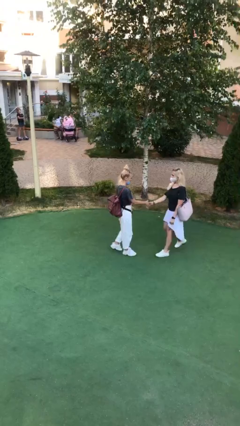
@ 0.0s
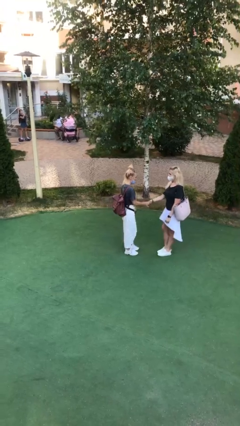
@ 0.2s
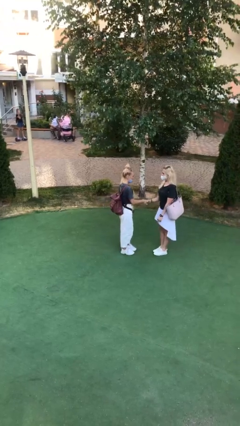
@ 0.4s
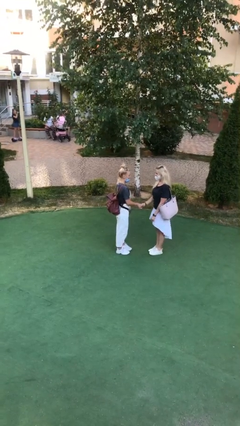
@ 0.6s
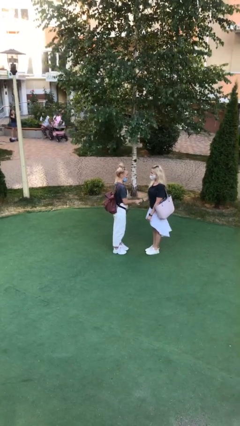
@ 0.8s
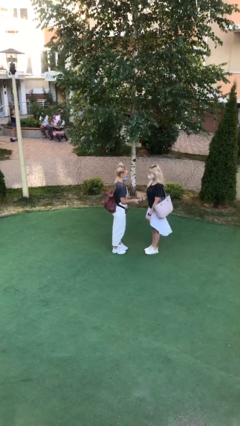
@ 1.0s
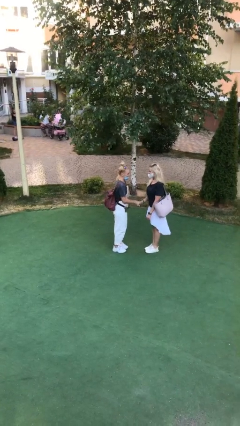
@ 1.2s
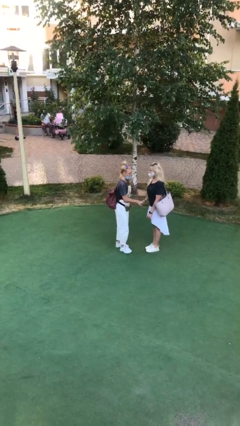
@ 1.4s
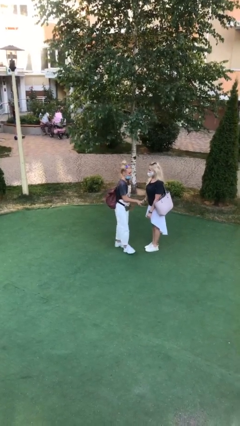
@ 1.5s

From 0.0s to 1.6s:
person shakes hand

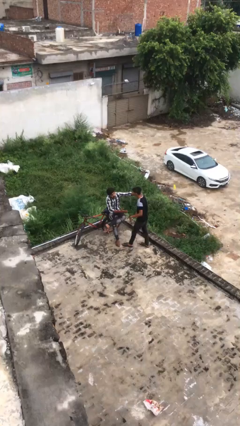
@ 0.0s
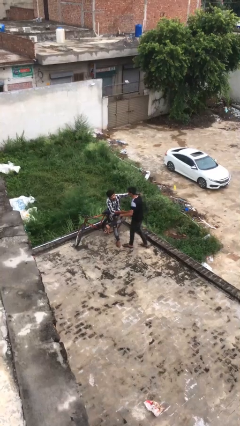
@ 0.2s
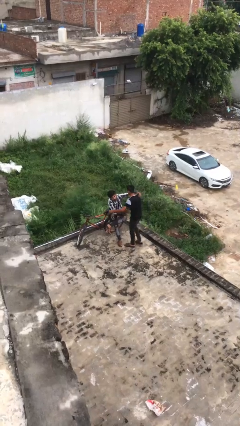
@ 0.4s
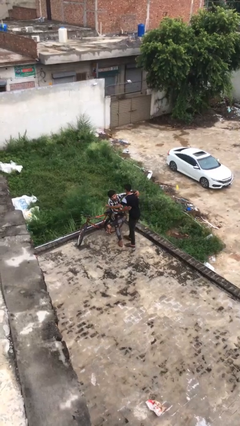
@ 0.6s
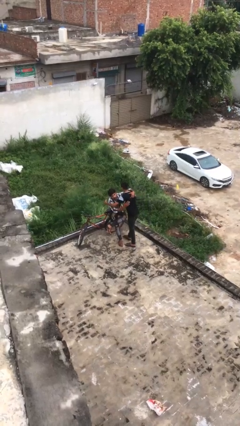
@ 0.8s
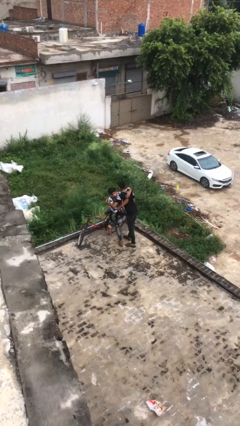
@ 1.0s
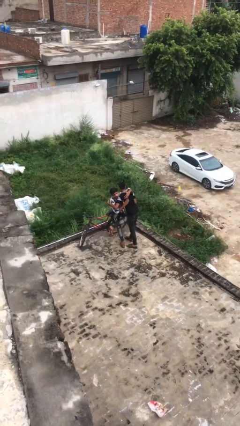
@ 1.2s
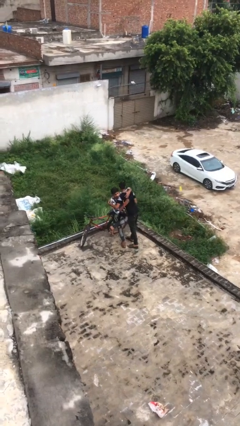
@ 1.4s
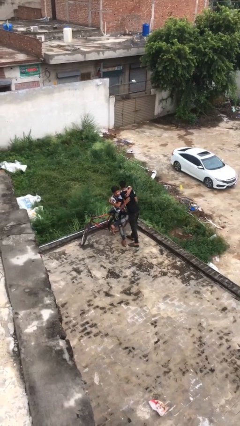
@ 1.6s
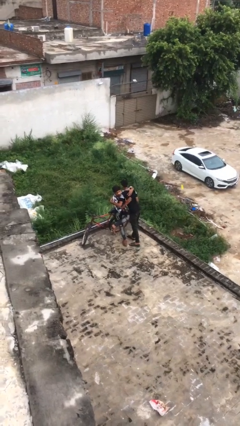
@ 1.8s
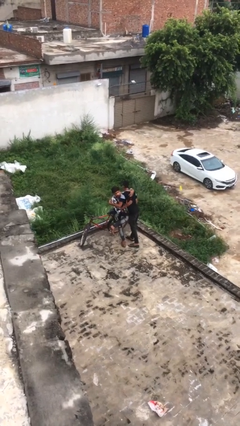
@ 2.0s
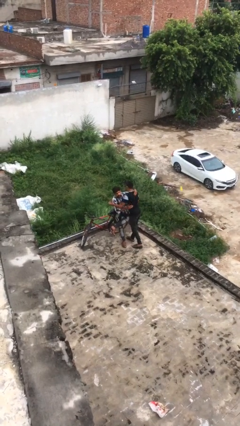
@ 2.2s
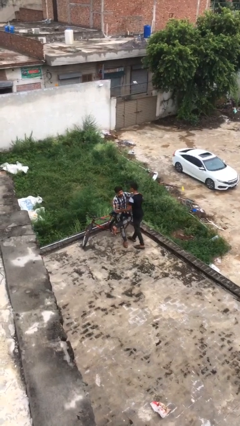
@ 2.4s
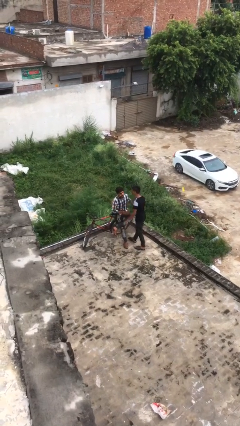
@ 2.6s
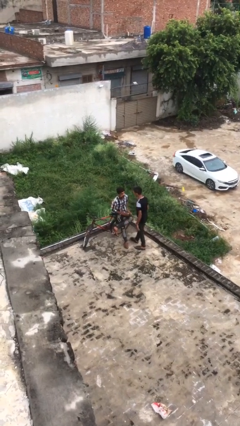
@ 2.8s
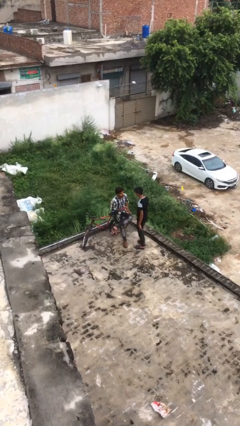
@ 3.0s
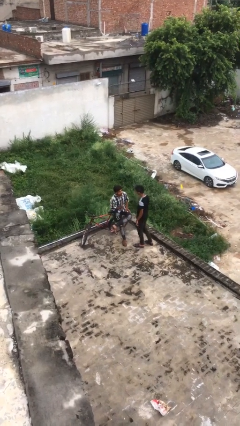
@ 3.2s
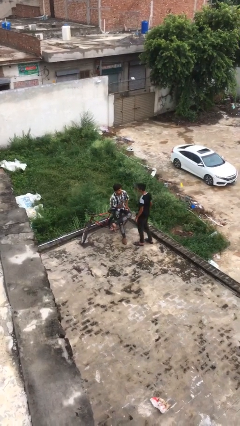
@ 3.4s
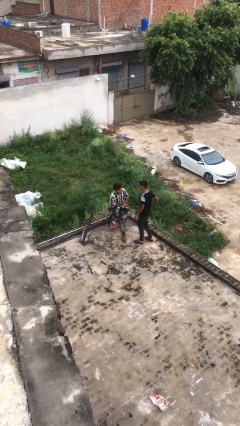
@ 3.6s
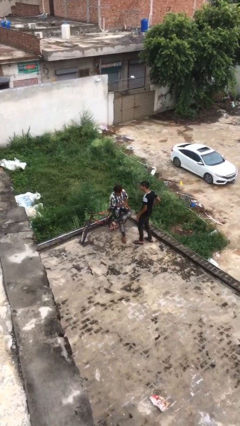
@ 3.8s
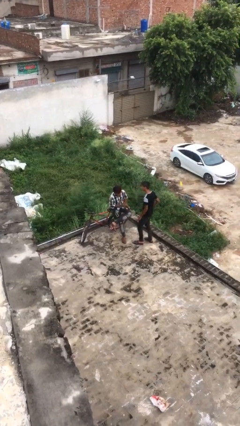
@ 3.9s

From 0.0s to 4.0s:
person embraces person

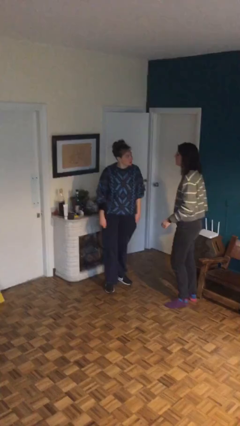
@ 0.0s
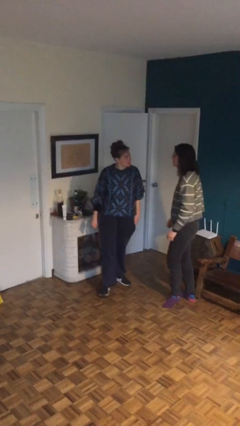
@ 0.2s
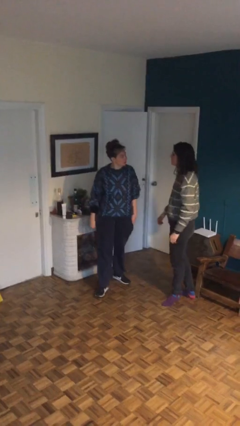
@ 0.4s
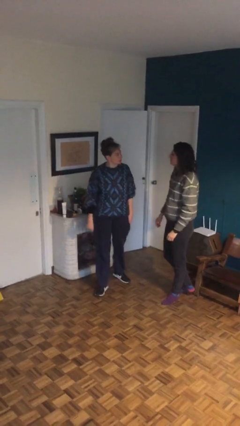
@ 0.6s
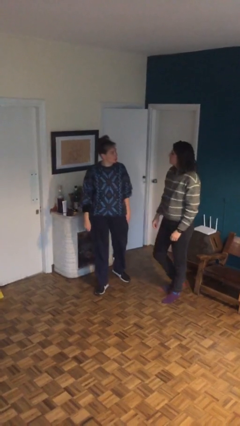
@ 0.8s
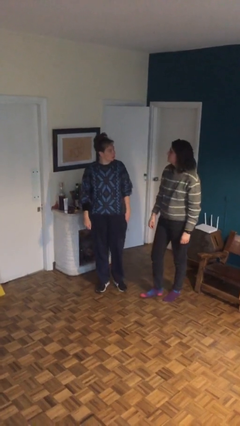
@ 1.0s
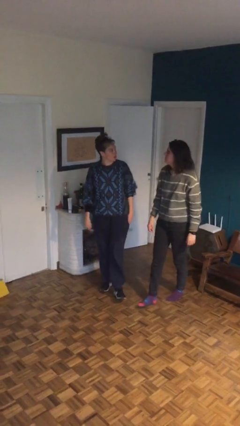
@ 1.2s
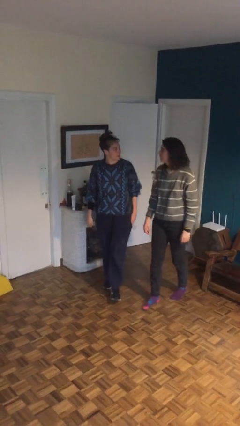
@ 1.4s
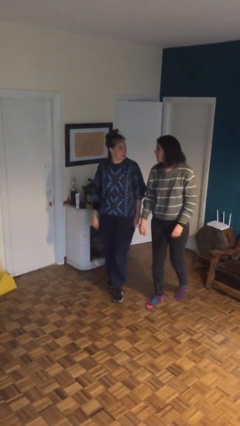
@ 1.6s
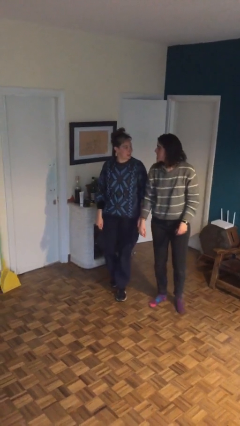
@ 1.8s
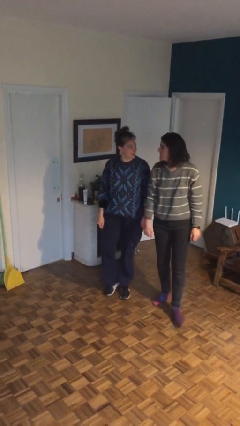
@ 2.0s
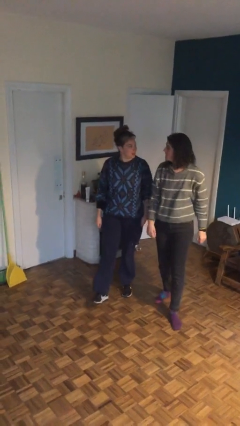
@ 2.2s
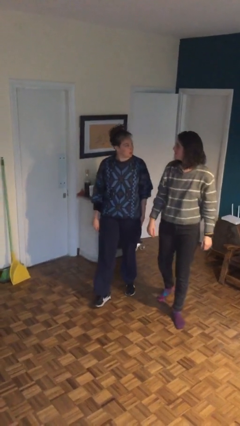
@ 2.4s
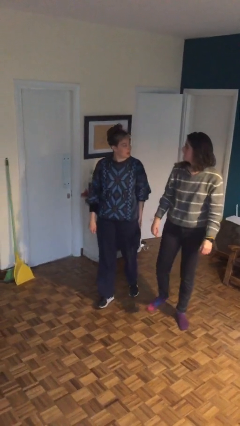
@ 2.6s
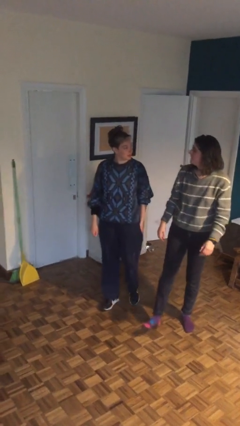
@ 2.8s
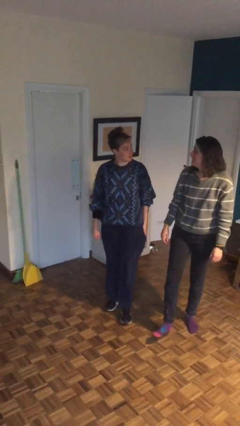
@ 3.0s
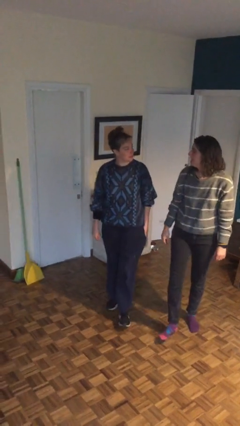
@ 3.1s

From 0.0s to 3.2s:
person talks to person

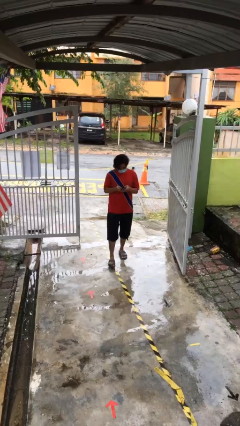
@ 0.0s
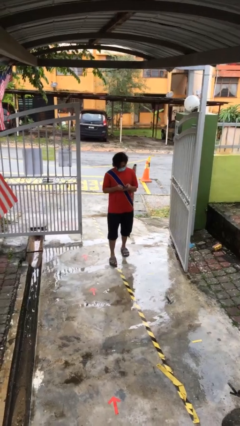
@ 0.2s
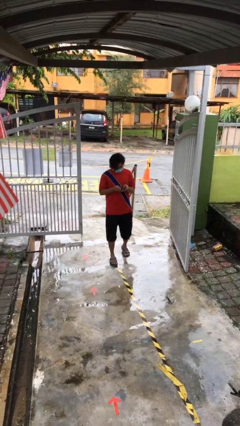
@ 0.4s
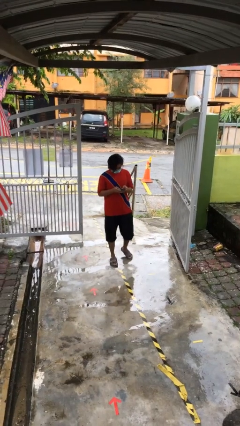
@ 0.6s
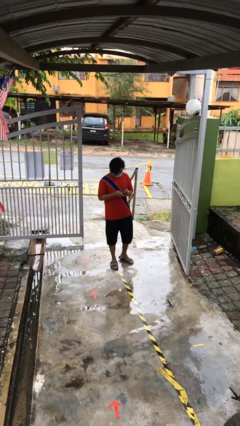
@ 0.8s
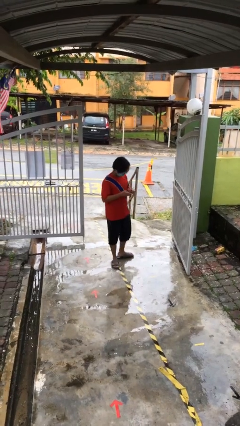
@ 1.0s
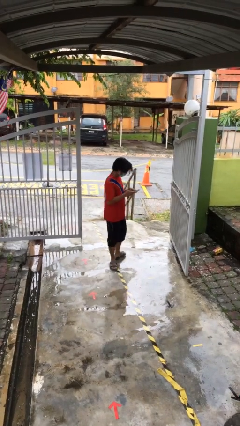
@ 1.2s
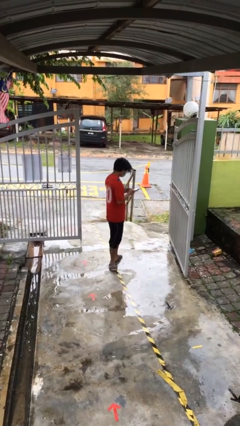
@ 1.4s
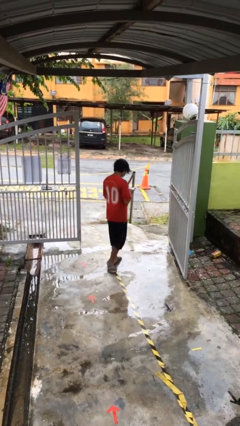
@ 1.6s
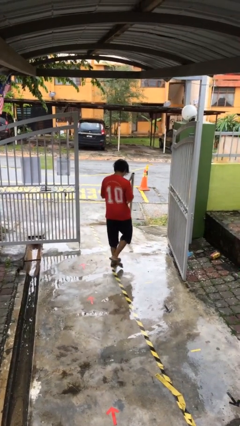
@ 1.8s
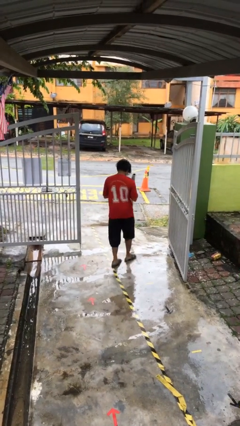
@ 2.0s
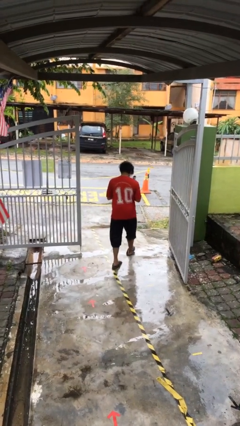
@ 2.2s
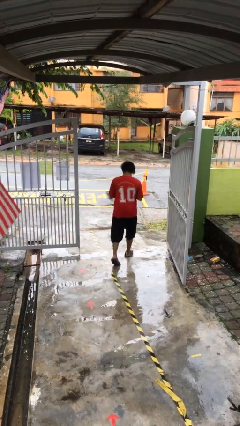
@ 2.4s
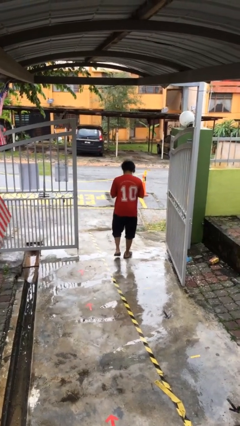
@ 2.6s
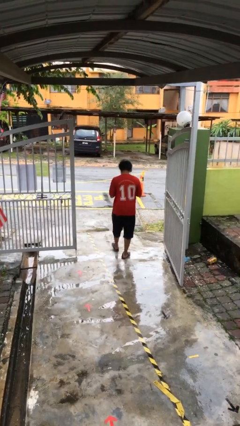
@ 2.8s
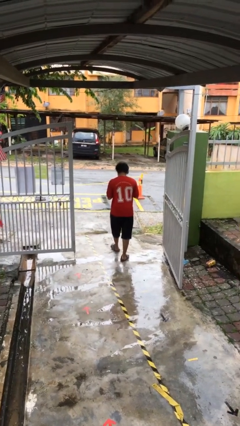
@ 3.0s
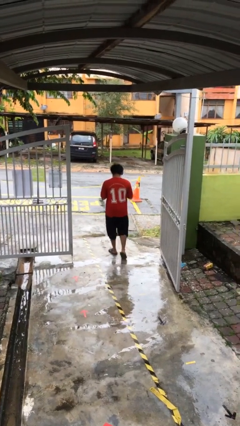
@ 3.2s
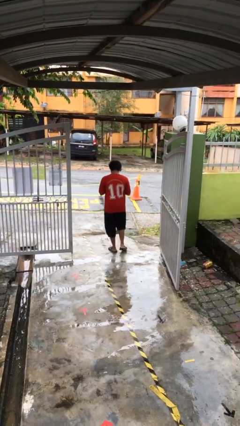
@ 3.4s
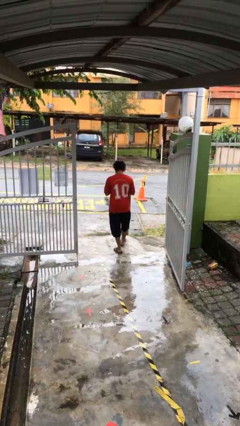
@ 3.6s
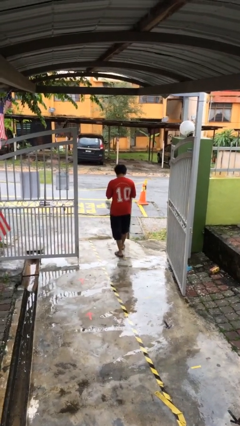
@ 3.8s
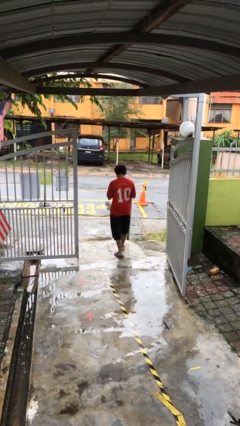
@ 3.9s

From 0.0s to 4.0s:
person exits scene through structure

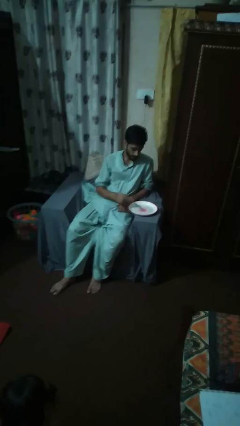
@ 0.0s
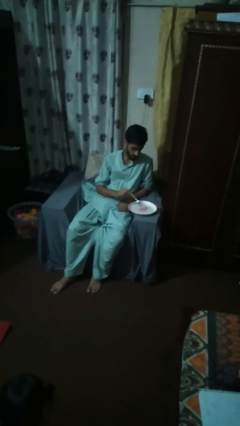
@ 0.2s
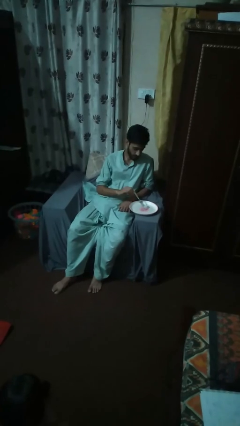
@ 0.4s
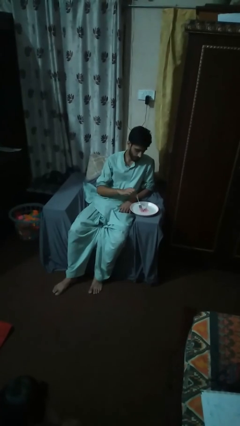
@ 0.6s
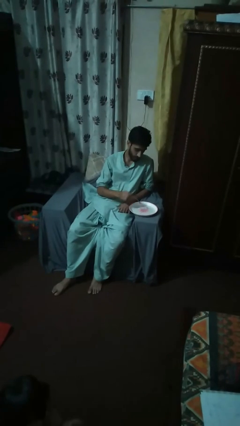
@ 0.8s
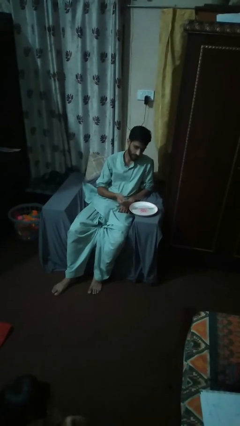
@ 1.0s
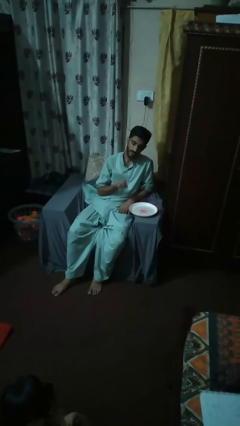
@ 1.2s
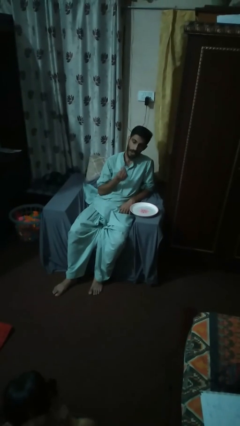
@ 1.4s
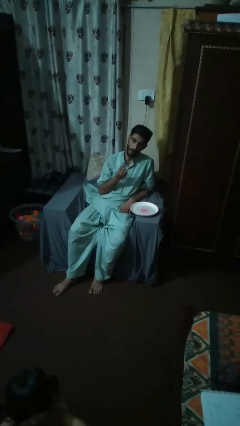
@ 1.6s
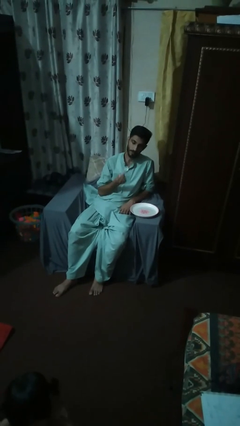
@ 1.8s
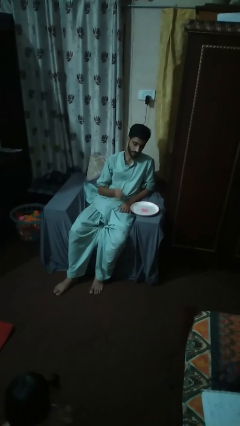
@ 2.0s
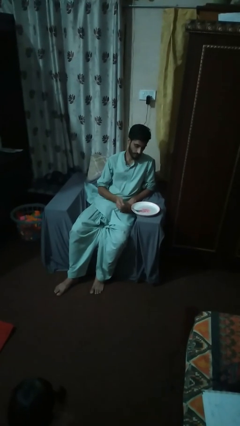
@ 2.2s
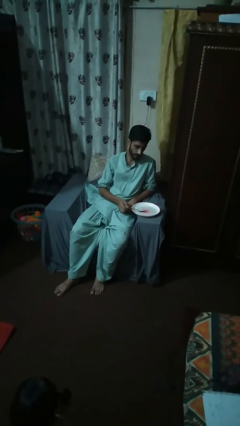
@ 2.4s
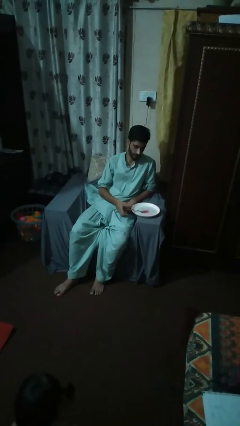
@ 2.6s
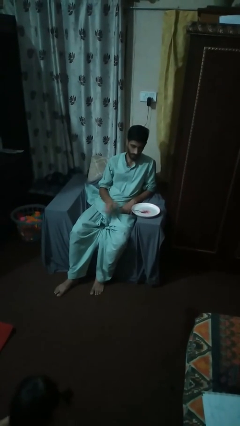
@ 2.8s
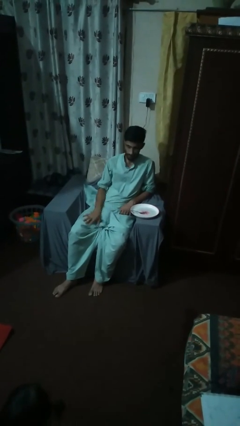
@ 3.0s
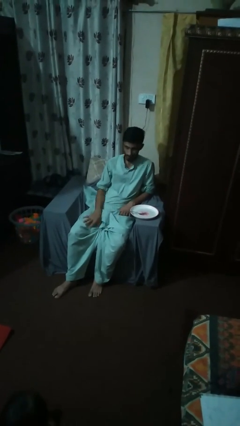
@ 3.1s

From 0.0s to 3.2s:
person eats with utensil

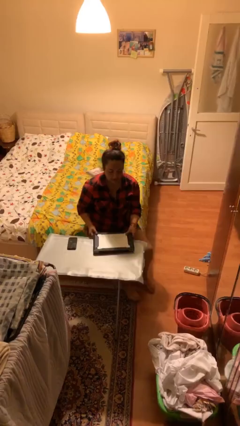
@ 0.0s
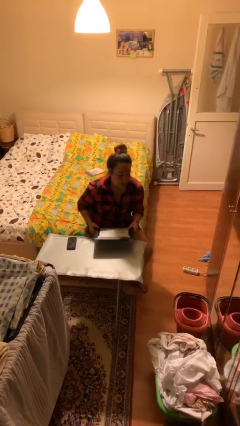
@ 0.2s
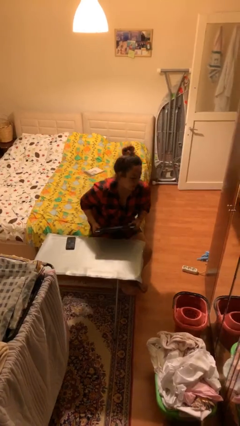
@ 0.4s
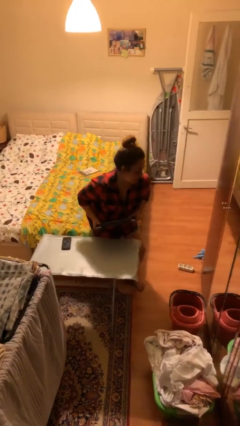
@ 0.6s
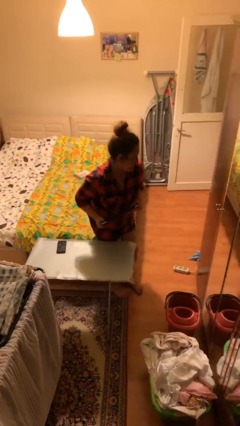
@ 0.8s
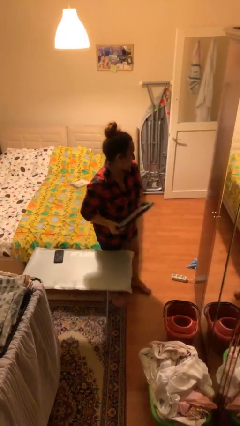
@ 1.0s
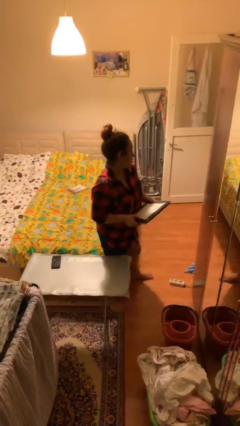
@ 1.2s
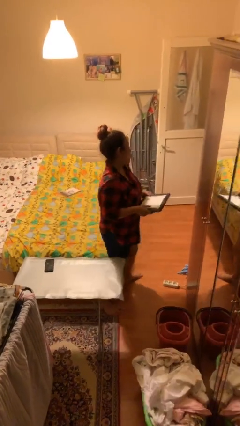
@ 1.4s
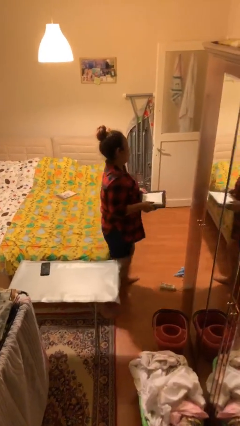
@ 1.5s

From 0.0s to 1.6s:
person stands up
